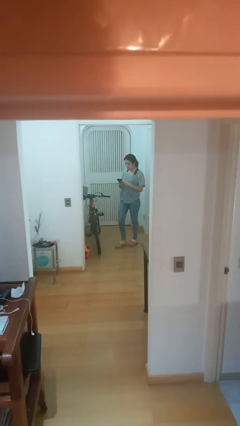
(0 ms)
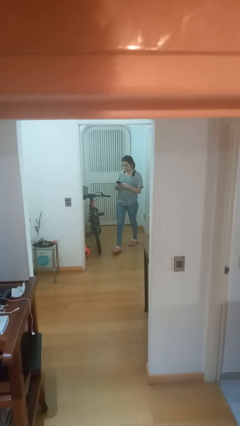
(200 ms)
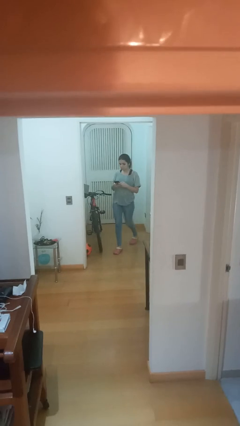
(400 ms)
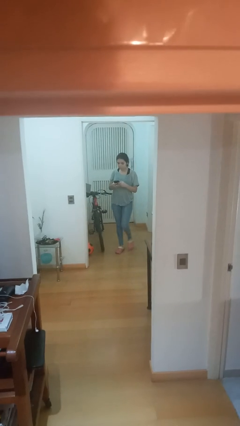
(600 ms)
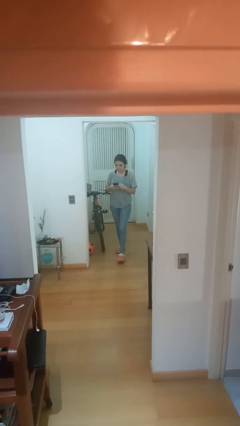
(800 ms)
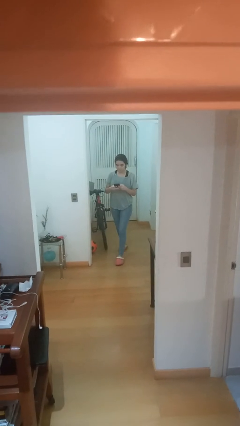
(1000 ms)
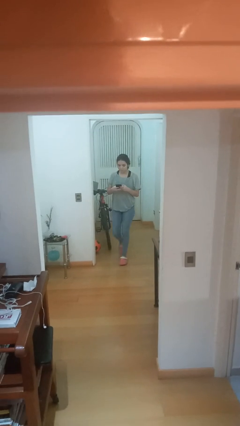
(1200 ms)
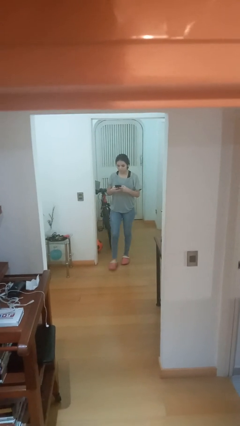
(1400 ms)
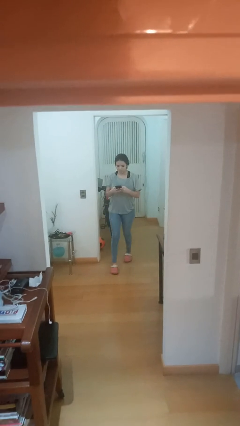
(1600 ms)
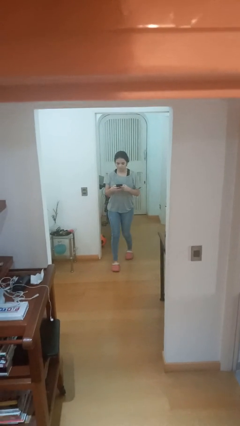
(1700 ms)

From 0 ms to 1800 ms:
person enters scene through structure

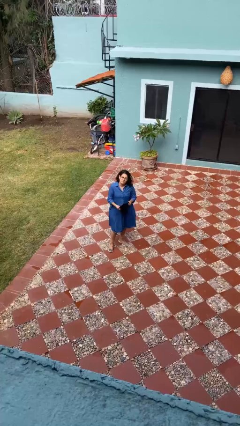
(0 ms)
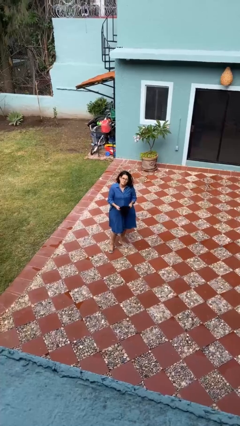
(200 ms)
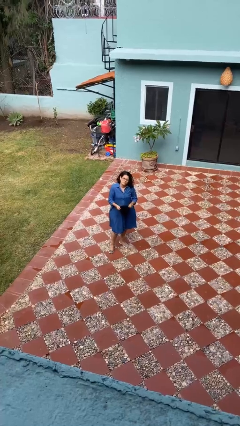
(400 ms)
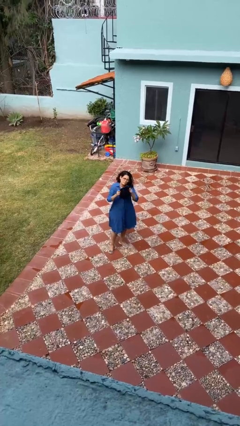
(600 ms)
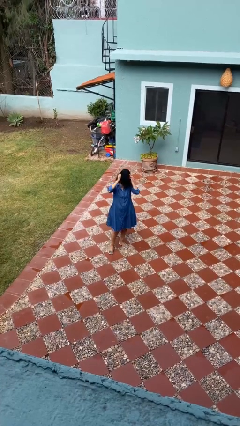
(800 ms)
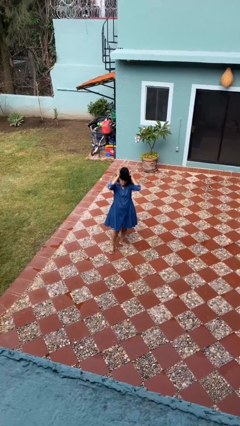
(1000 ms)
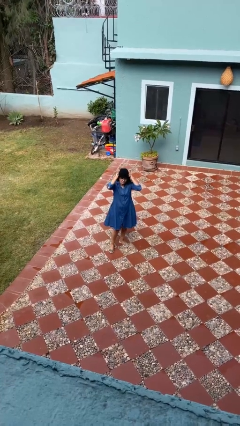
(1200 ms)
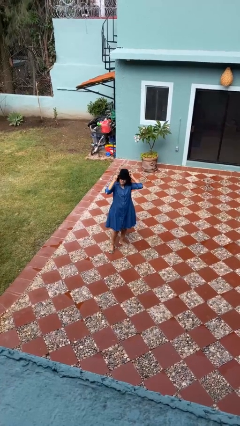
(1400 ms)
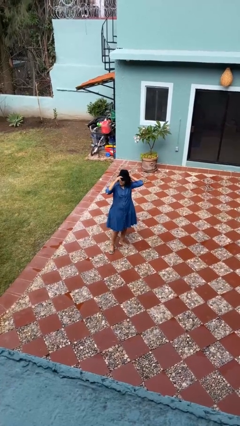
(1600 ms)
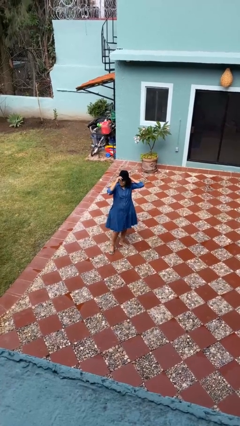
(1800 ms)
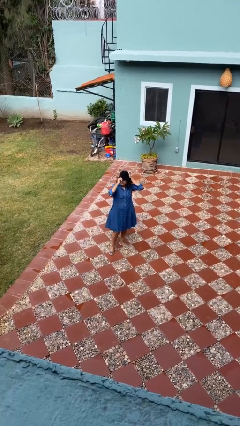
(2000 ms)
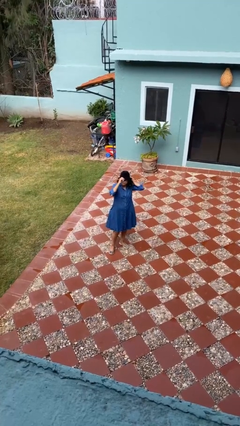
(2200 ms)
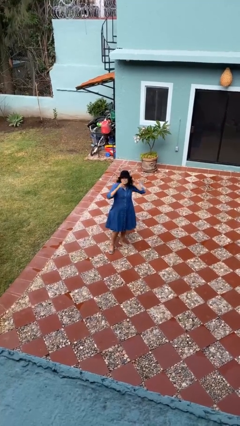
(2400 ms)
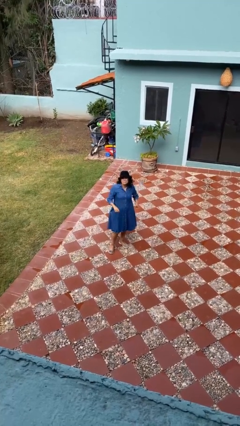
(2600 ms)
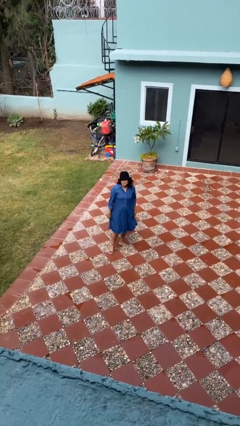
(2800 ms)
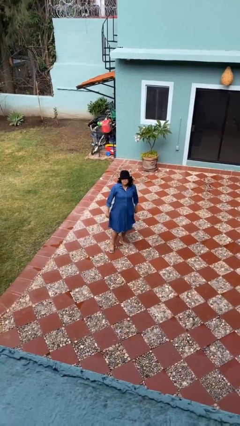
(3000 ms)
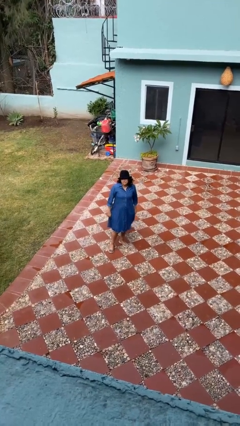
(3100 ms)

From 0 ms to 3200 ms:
person puts on hat

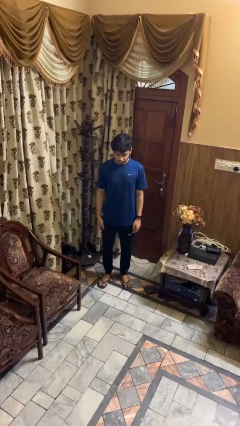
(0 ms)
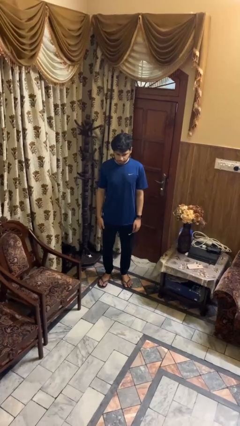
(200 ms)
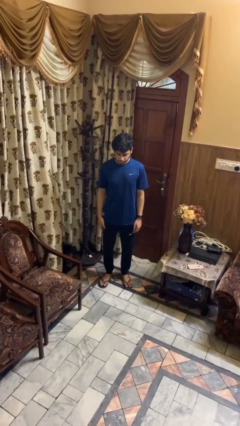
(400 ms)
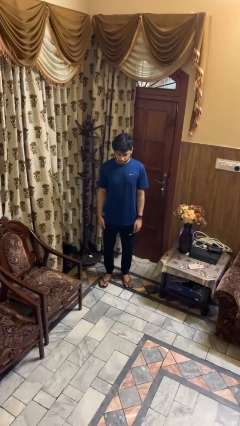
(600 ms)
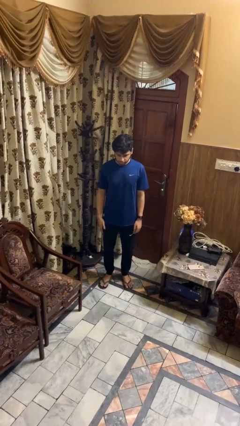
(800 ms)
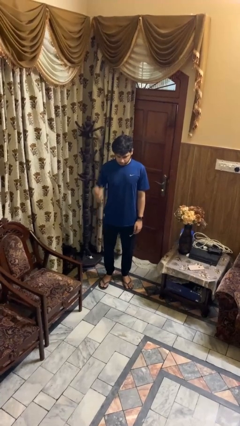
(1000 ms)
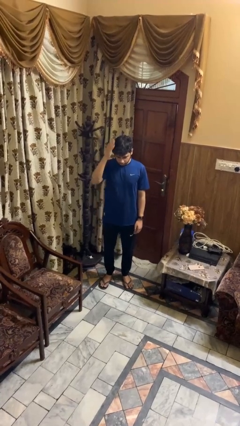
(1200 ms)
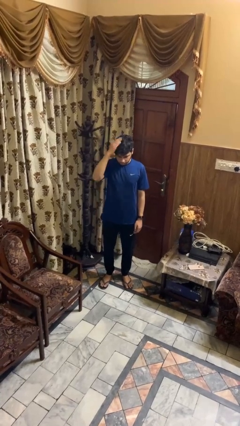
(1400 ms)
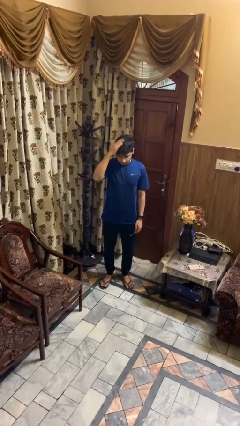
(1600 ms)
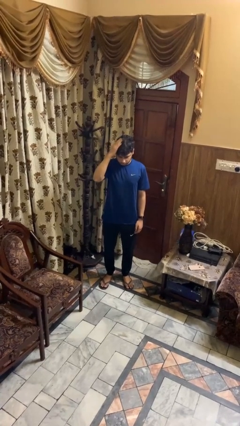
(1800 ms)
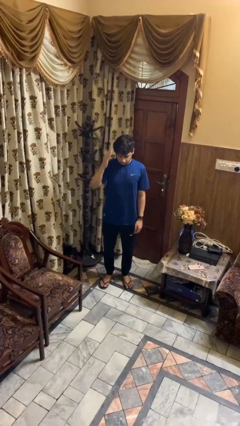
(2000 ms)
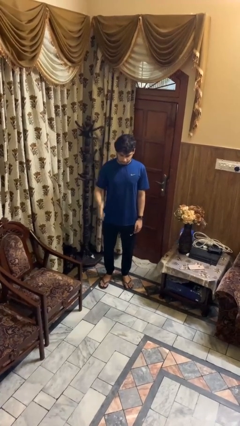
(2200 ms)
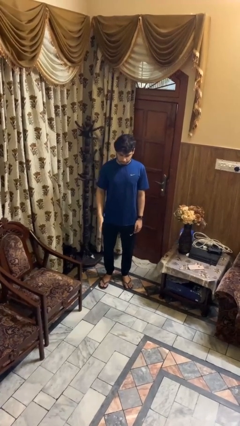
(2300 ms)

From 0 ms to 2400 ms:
person pats head

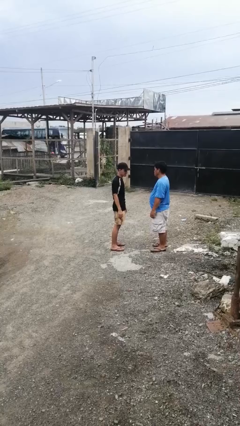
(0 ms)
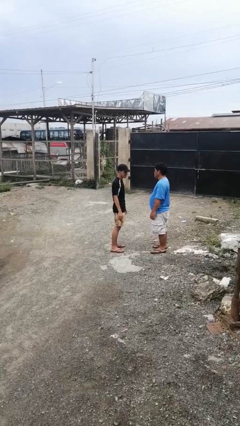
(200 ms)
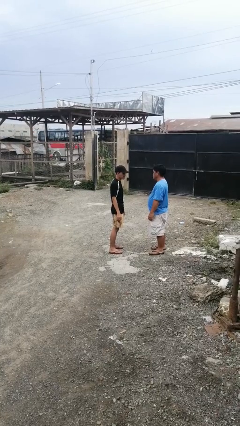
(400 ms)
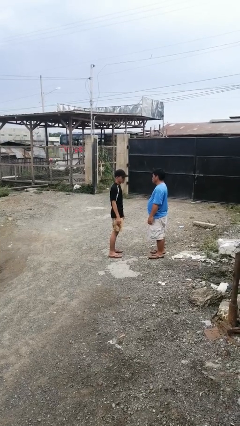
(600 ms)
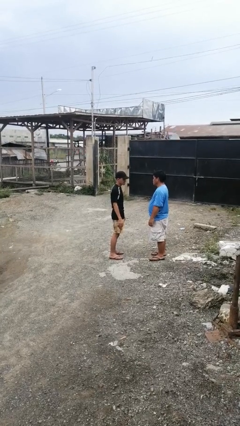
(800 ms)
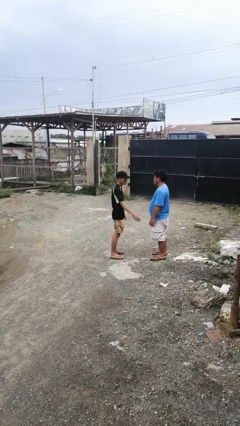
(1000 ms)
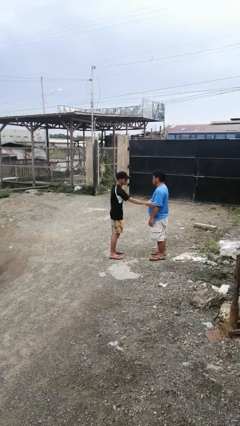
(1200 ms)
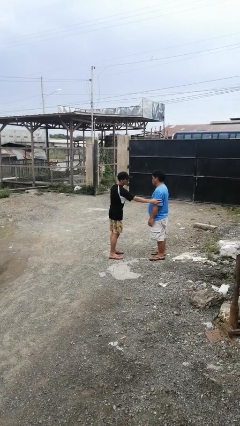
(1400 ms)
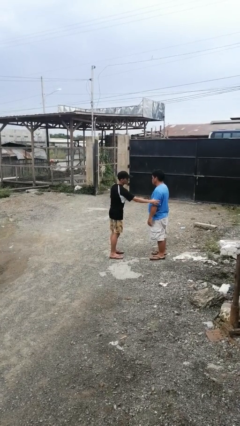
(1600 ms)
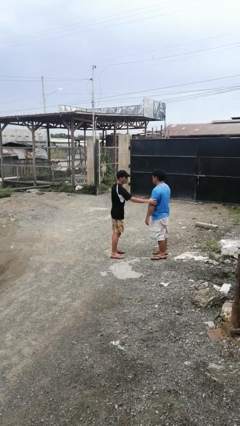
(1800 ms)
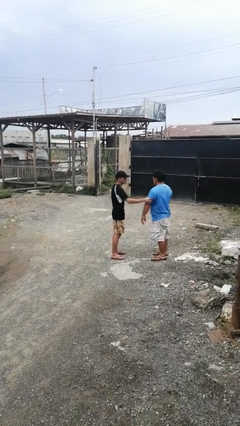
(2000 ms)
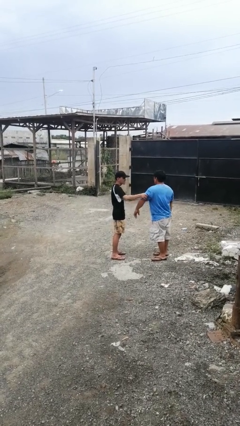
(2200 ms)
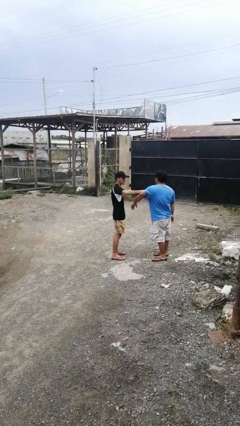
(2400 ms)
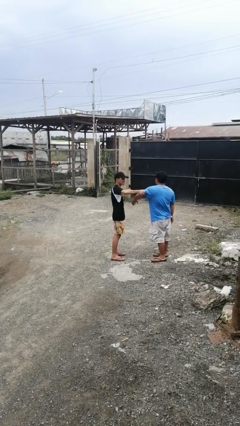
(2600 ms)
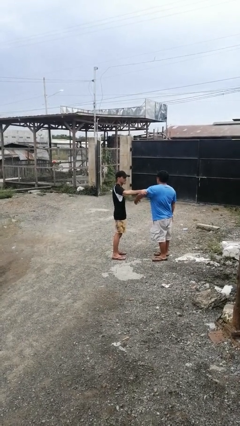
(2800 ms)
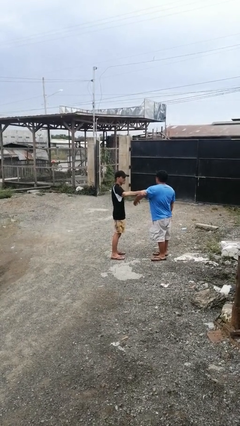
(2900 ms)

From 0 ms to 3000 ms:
person grabs person by bicep

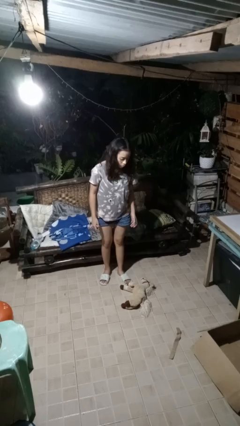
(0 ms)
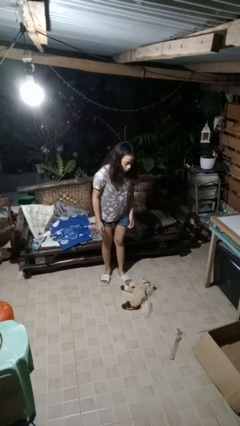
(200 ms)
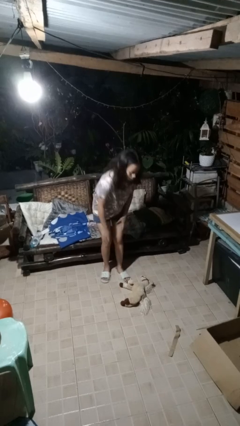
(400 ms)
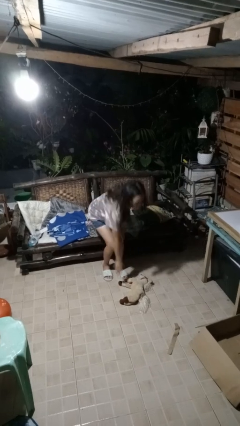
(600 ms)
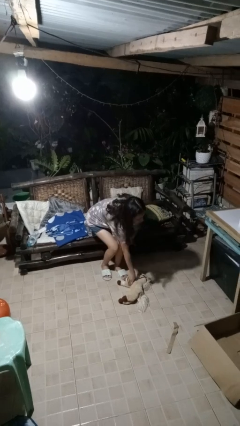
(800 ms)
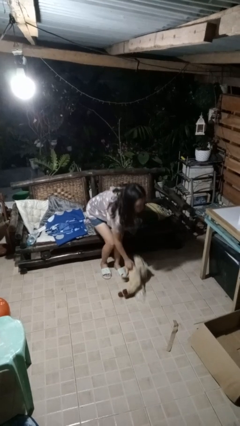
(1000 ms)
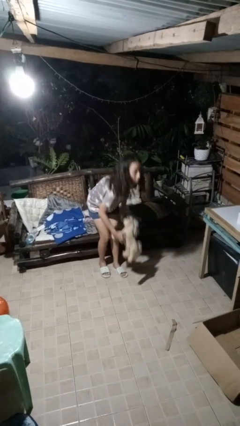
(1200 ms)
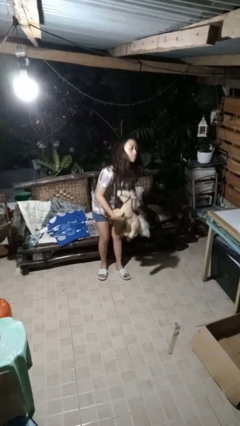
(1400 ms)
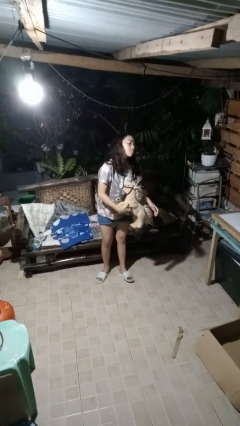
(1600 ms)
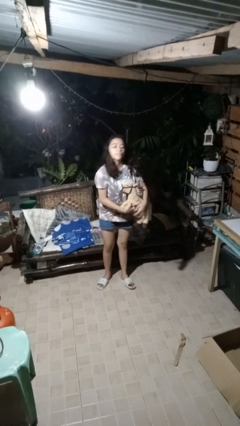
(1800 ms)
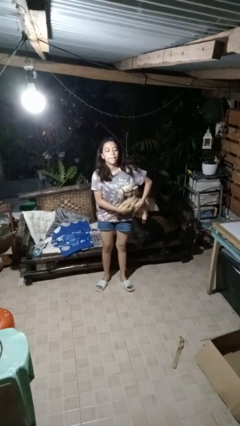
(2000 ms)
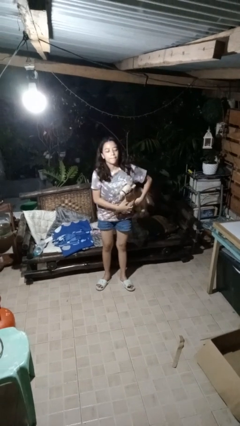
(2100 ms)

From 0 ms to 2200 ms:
person picks up object from floor

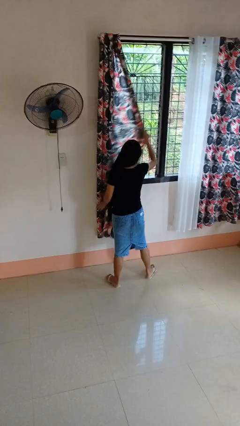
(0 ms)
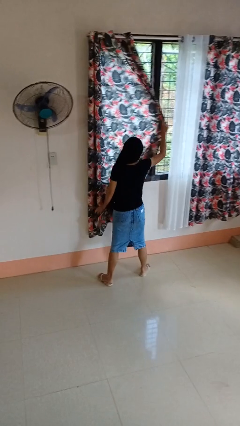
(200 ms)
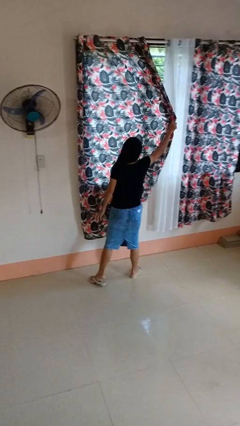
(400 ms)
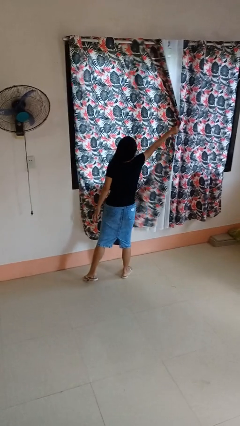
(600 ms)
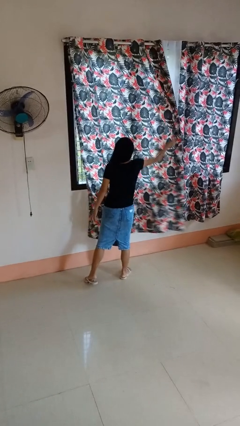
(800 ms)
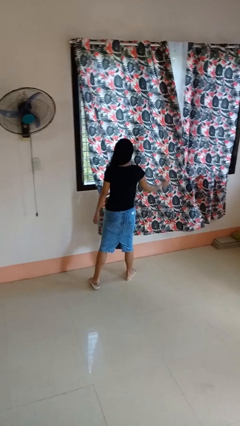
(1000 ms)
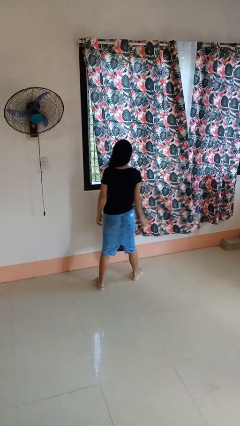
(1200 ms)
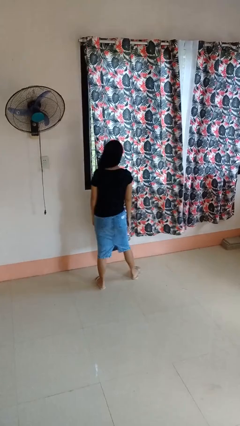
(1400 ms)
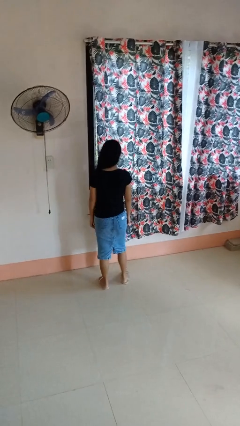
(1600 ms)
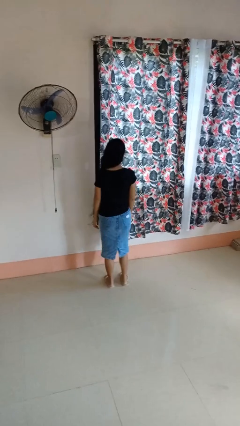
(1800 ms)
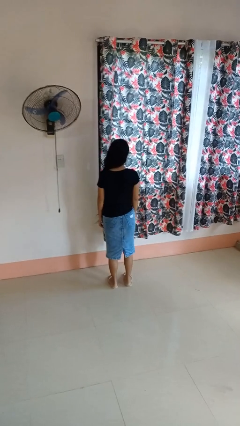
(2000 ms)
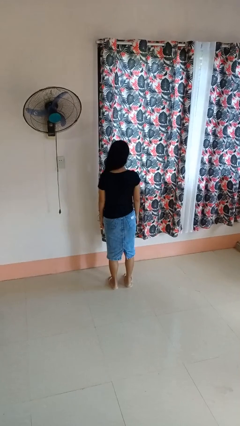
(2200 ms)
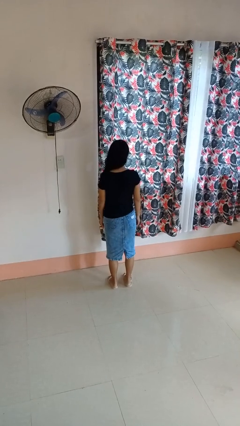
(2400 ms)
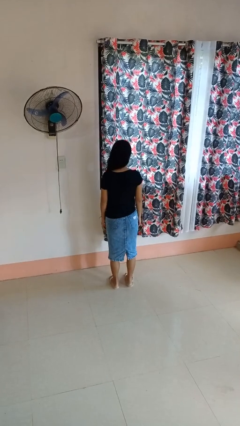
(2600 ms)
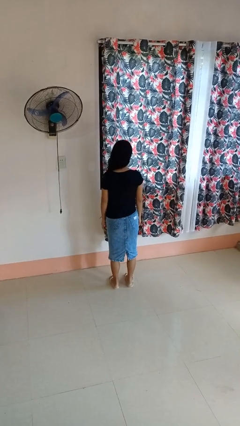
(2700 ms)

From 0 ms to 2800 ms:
person closes curtains

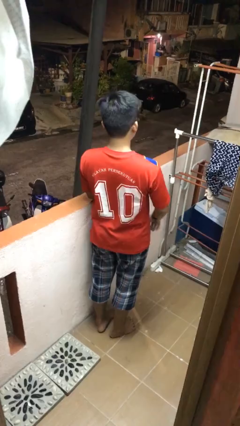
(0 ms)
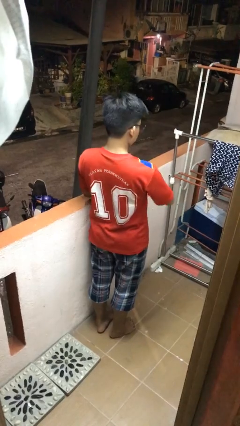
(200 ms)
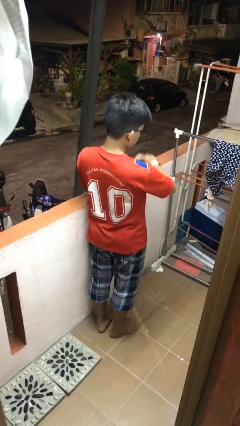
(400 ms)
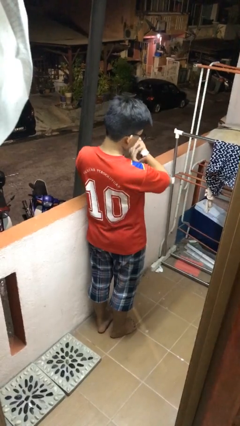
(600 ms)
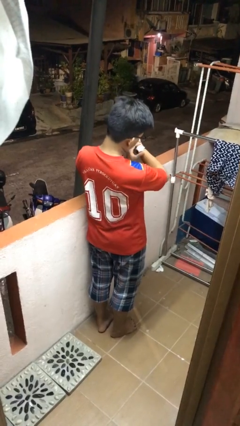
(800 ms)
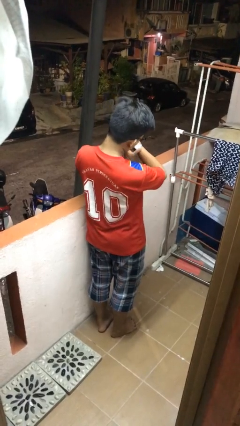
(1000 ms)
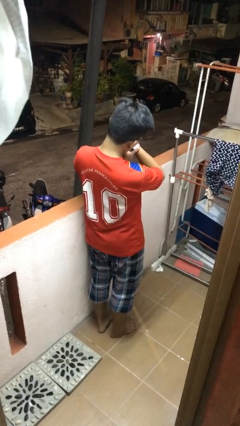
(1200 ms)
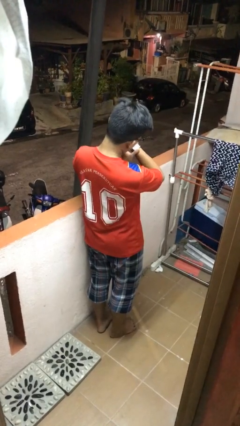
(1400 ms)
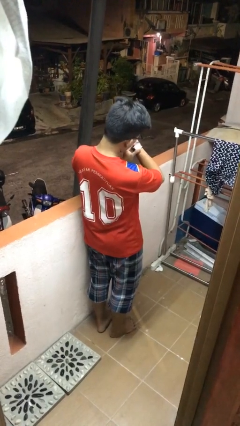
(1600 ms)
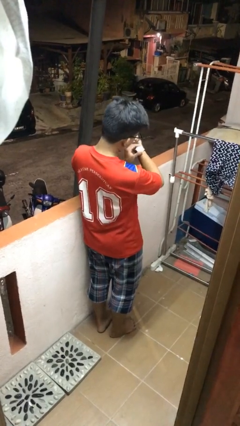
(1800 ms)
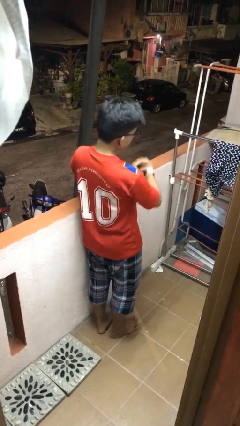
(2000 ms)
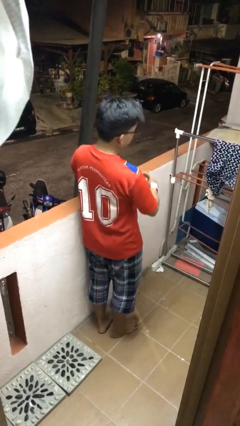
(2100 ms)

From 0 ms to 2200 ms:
person looks at wristwatch
